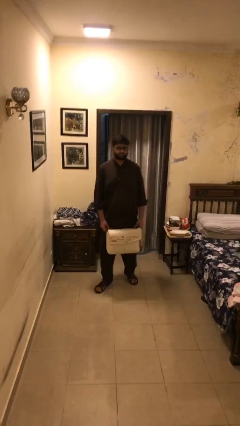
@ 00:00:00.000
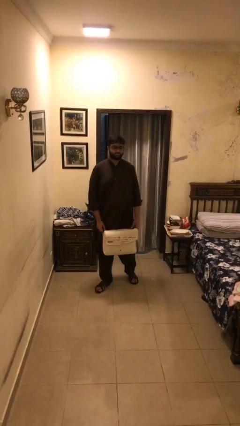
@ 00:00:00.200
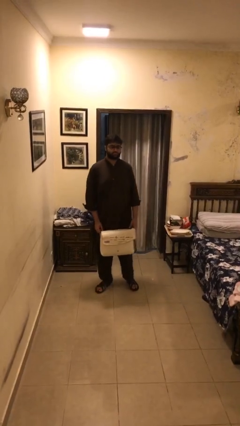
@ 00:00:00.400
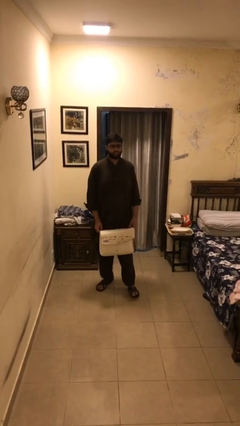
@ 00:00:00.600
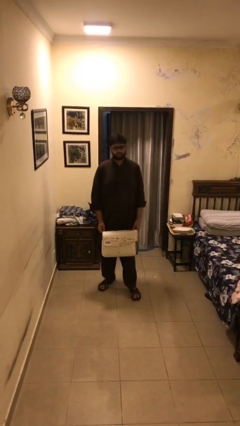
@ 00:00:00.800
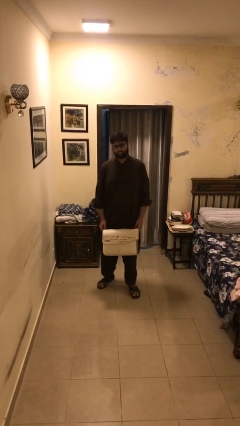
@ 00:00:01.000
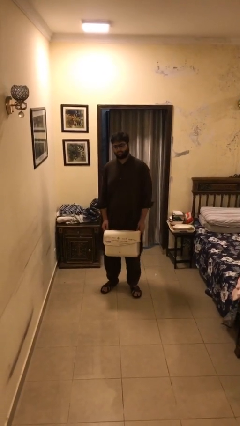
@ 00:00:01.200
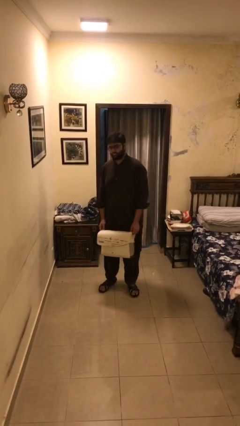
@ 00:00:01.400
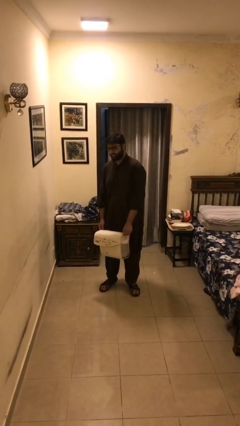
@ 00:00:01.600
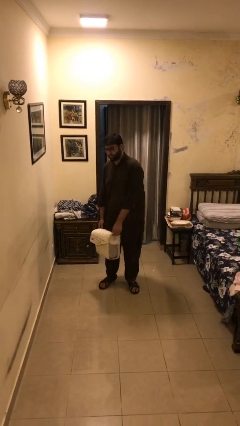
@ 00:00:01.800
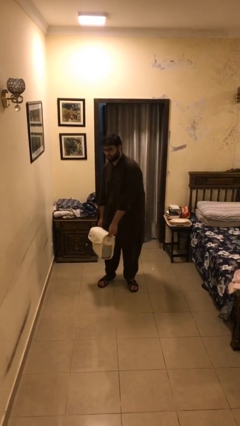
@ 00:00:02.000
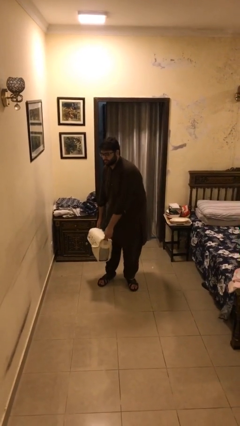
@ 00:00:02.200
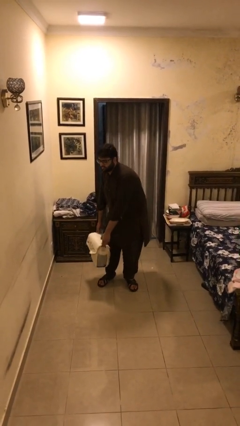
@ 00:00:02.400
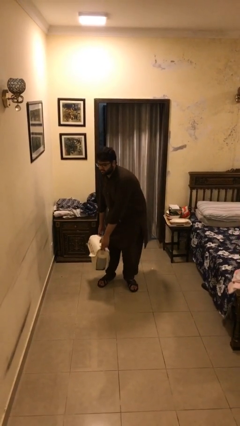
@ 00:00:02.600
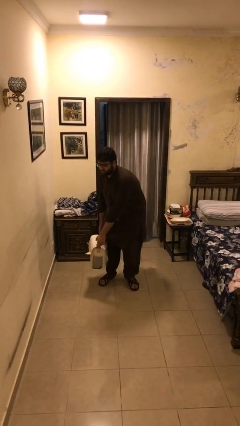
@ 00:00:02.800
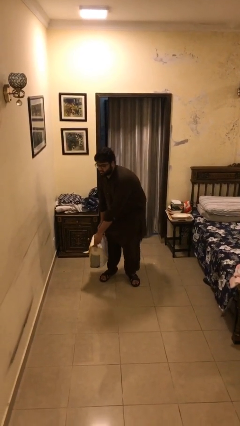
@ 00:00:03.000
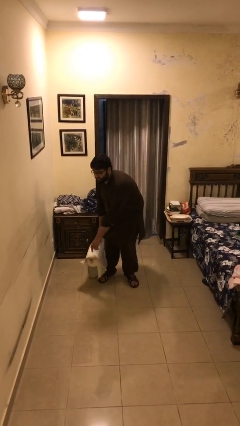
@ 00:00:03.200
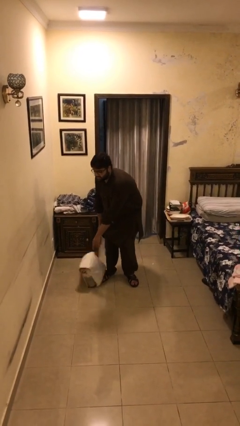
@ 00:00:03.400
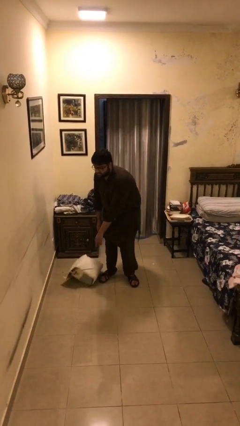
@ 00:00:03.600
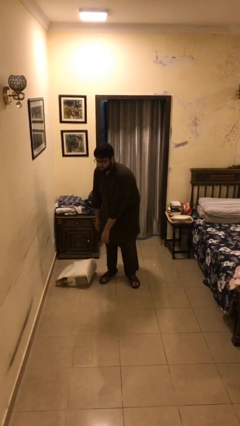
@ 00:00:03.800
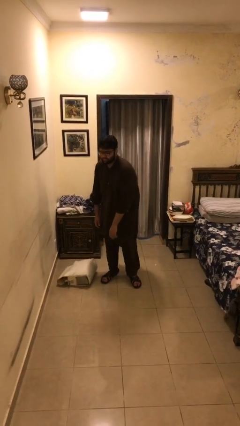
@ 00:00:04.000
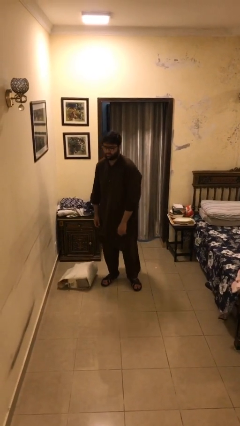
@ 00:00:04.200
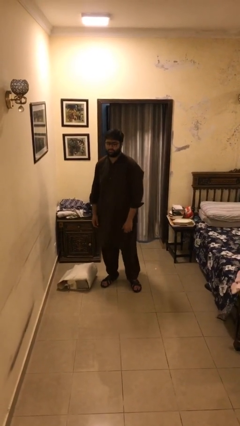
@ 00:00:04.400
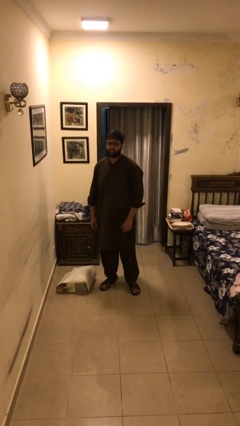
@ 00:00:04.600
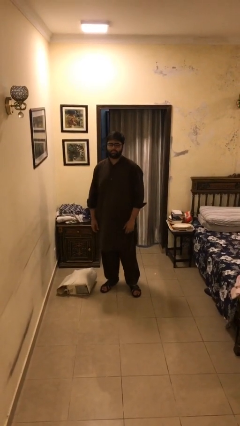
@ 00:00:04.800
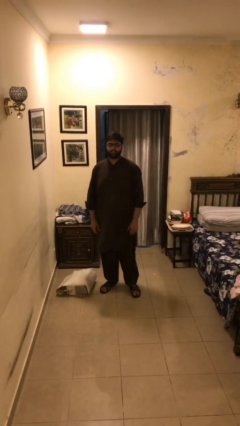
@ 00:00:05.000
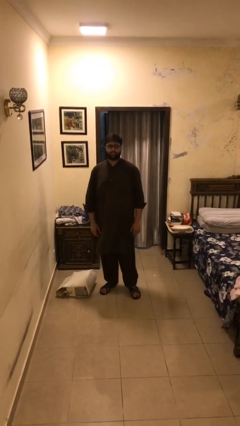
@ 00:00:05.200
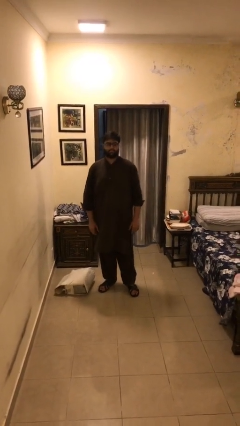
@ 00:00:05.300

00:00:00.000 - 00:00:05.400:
person puts down object on floor

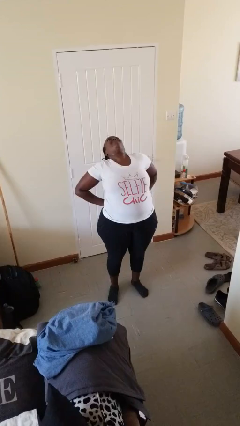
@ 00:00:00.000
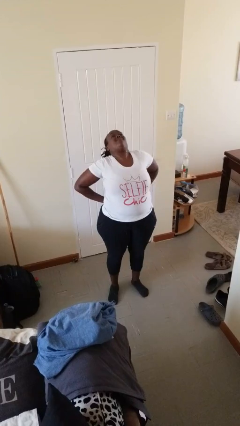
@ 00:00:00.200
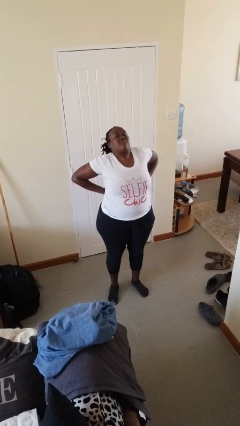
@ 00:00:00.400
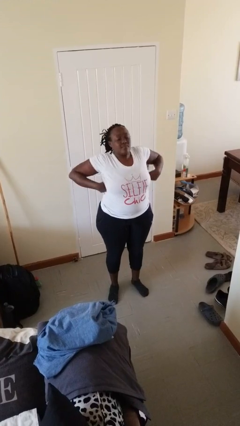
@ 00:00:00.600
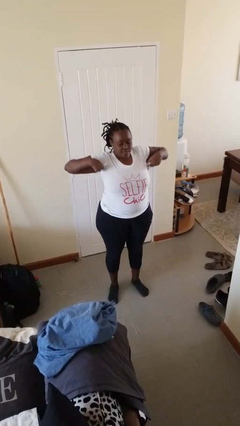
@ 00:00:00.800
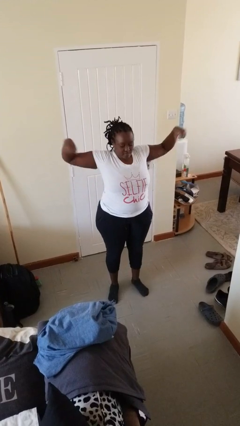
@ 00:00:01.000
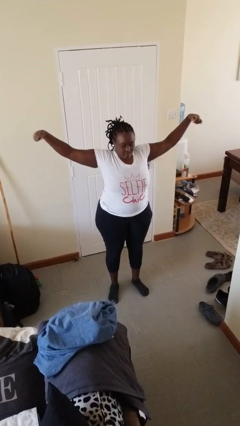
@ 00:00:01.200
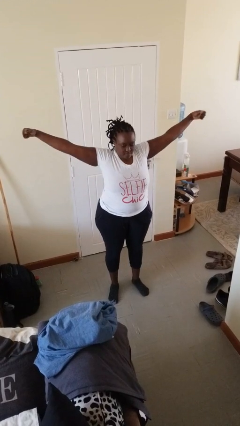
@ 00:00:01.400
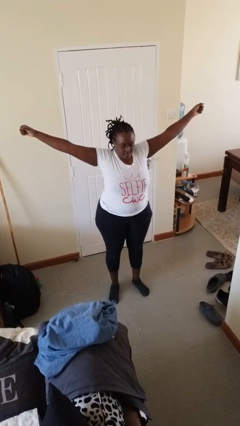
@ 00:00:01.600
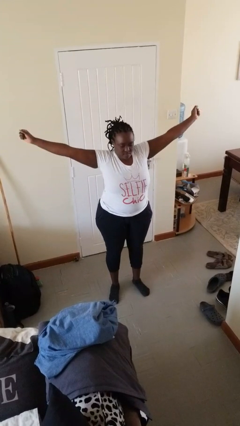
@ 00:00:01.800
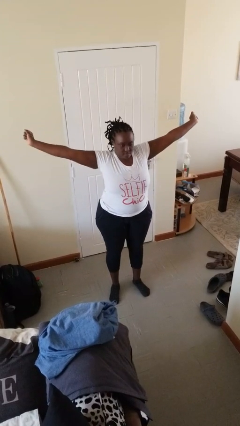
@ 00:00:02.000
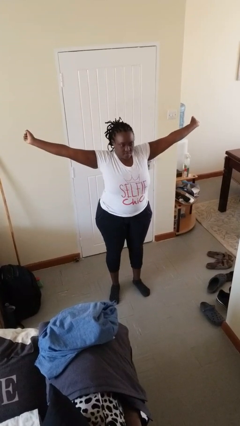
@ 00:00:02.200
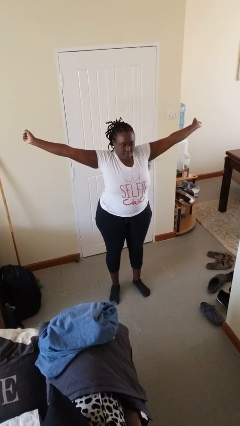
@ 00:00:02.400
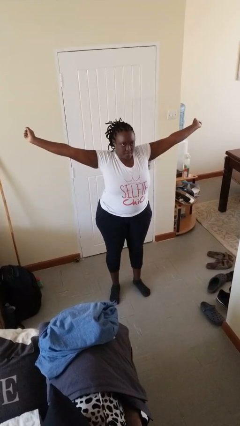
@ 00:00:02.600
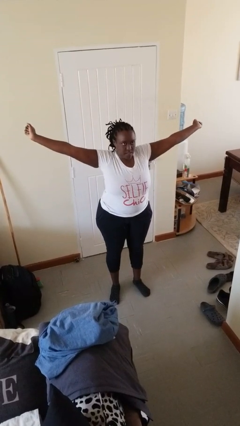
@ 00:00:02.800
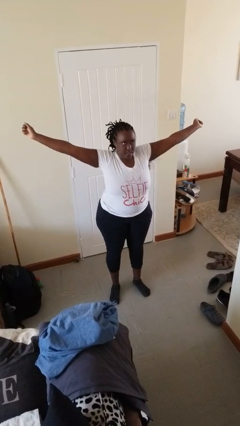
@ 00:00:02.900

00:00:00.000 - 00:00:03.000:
person stretches arms to side

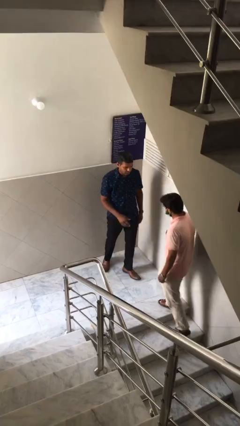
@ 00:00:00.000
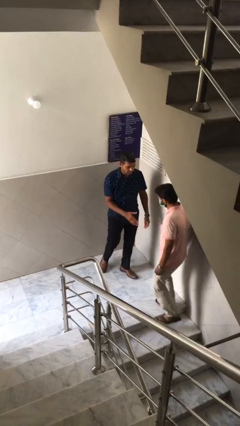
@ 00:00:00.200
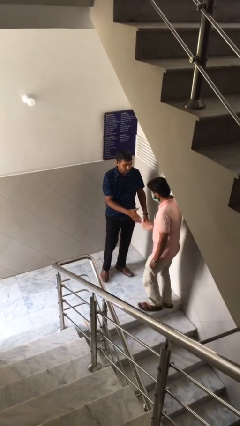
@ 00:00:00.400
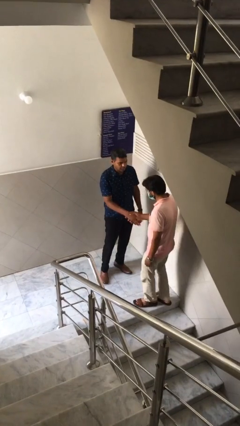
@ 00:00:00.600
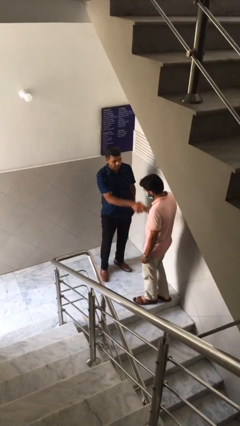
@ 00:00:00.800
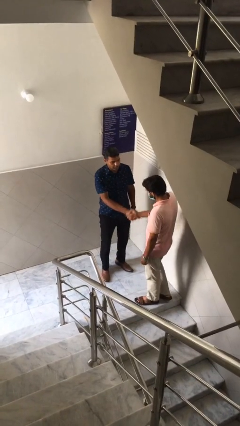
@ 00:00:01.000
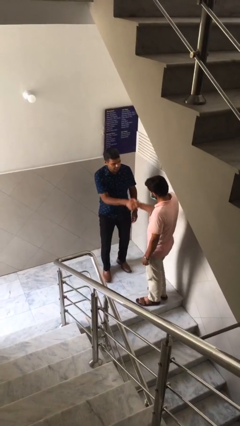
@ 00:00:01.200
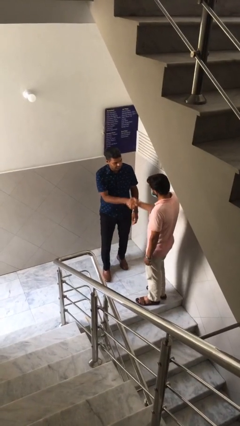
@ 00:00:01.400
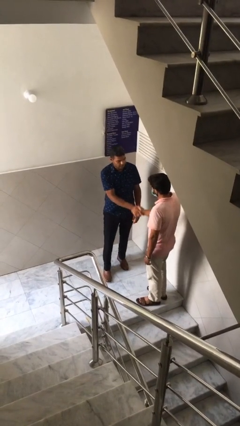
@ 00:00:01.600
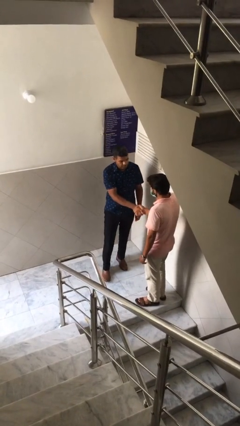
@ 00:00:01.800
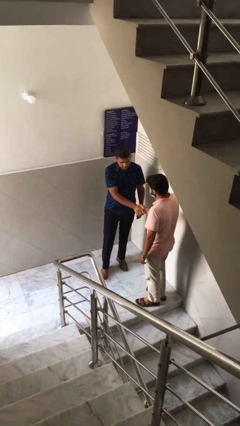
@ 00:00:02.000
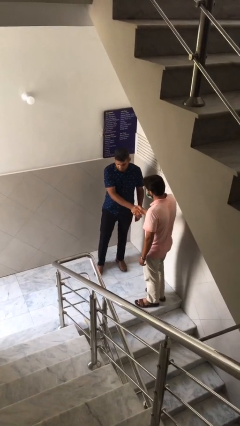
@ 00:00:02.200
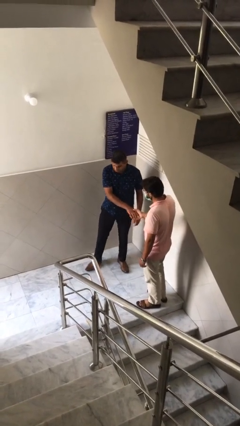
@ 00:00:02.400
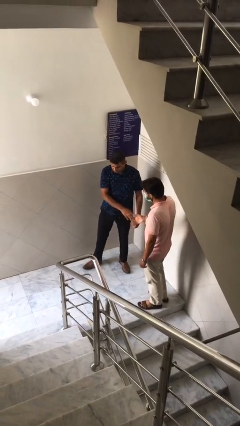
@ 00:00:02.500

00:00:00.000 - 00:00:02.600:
person shakes hand

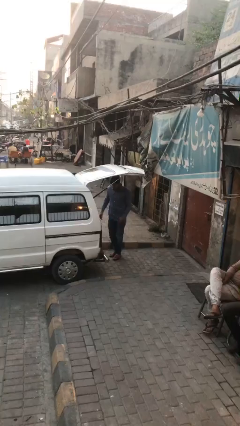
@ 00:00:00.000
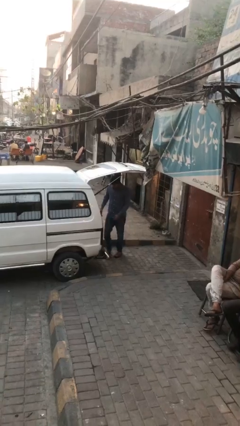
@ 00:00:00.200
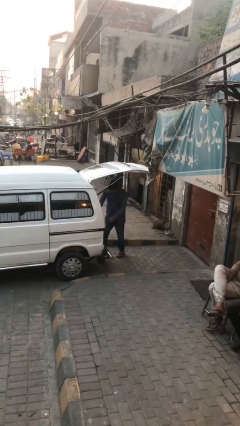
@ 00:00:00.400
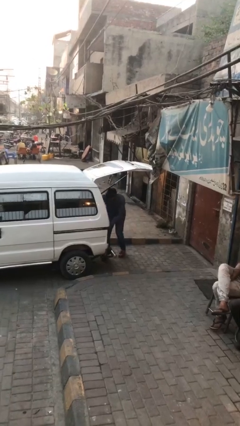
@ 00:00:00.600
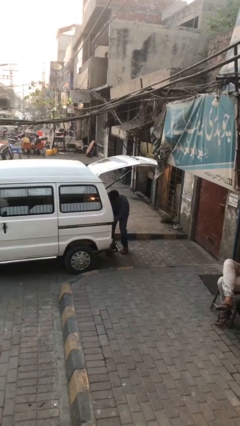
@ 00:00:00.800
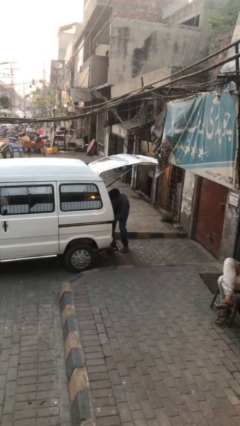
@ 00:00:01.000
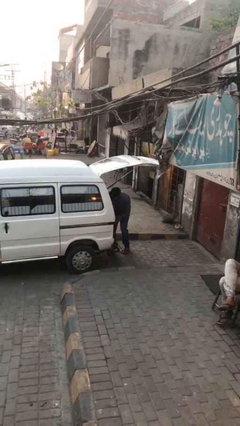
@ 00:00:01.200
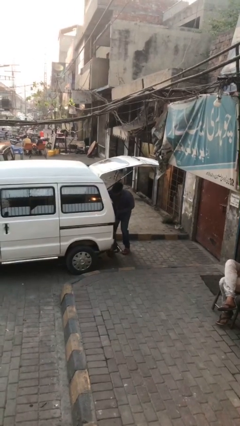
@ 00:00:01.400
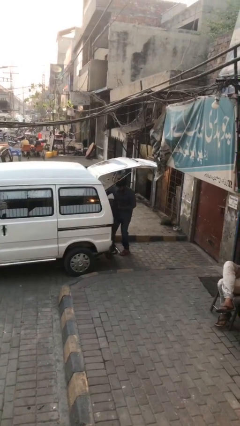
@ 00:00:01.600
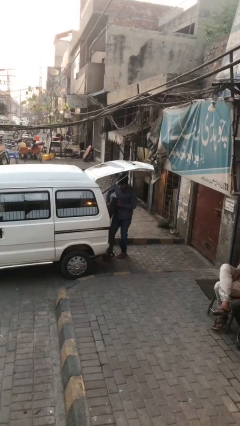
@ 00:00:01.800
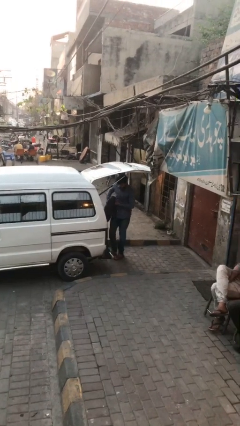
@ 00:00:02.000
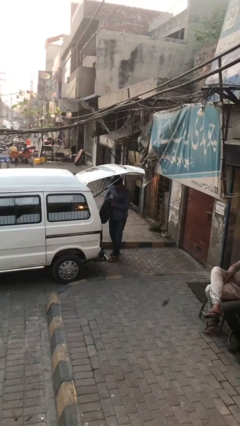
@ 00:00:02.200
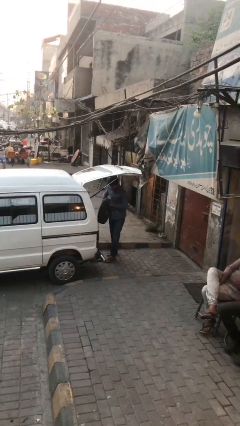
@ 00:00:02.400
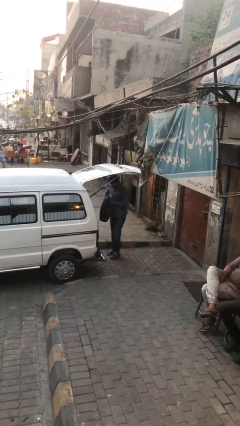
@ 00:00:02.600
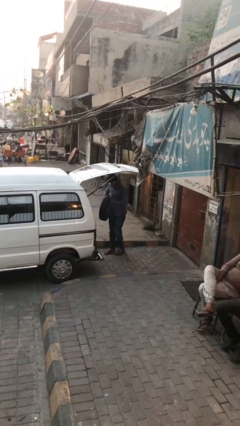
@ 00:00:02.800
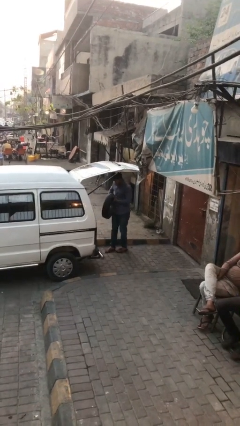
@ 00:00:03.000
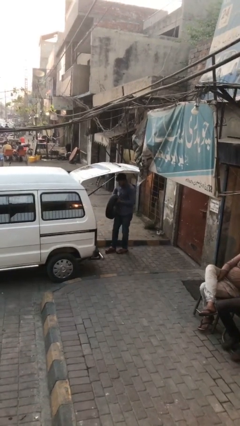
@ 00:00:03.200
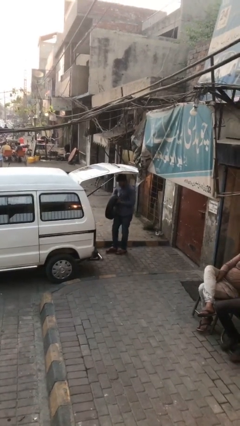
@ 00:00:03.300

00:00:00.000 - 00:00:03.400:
person unloads car

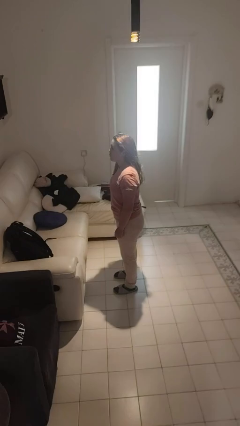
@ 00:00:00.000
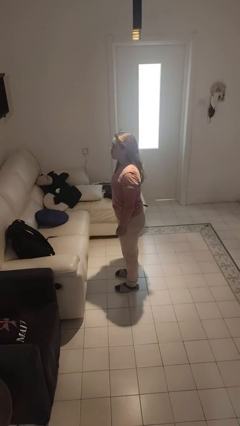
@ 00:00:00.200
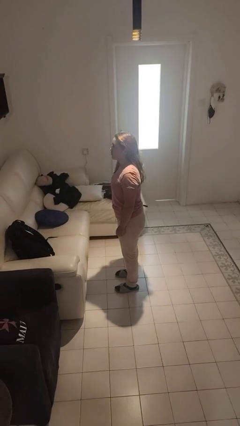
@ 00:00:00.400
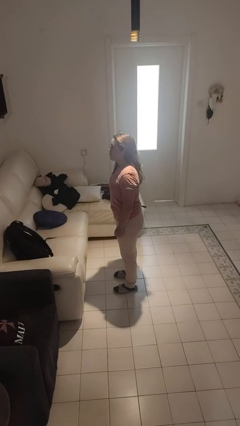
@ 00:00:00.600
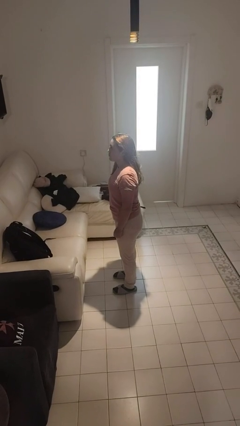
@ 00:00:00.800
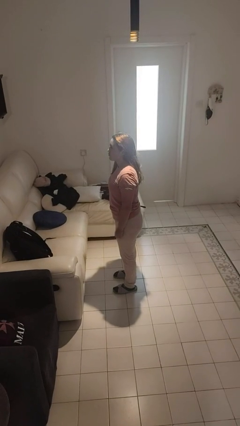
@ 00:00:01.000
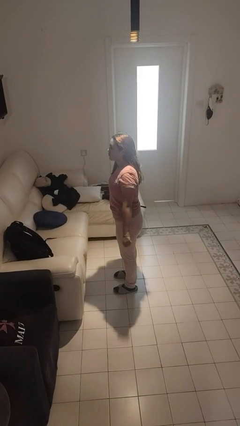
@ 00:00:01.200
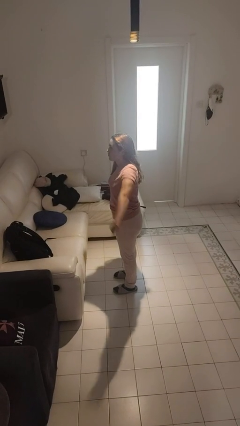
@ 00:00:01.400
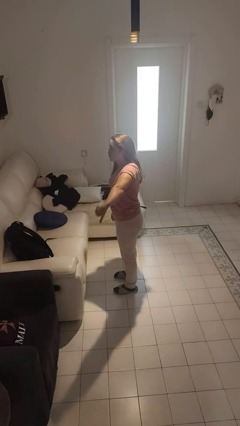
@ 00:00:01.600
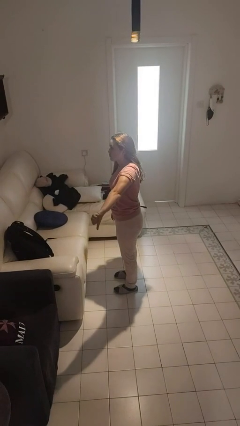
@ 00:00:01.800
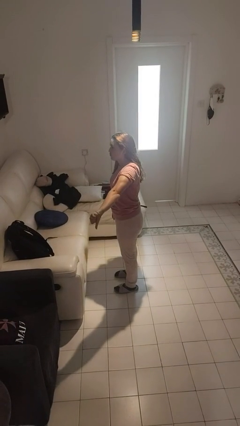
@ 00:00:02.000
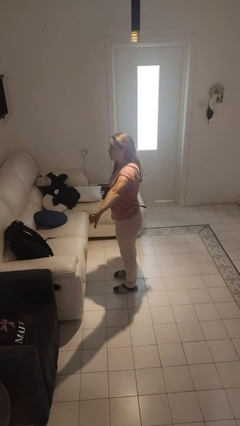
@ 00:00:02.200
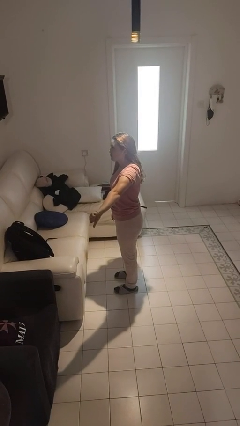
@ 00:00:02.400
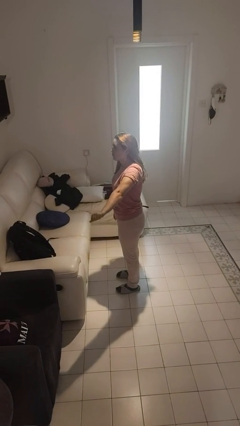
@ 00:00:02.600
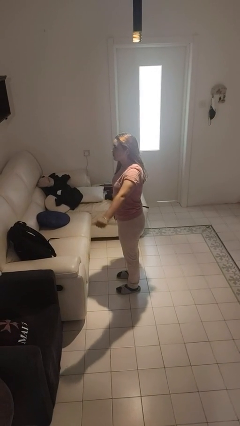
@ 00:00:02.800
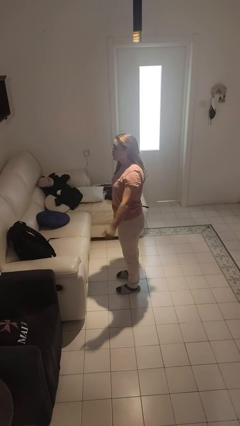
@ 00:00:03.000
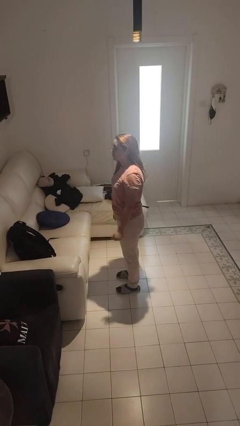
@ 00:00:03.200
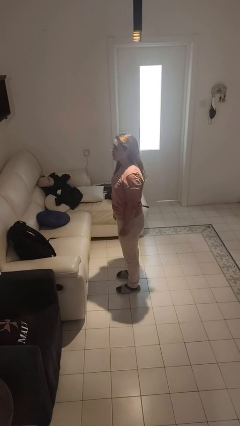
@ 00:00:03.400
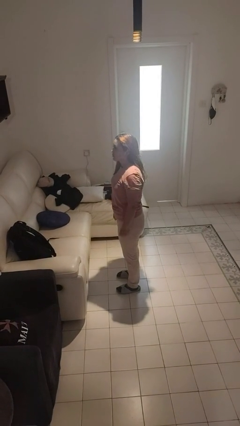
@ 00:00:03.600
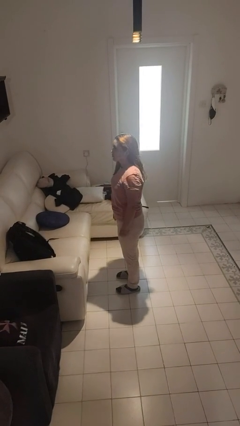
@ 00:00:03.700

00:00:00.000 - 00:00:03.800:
person gestures thumbs down
